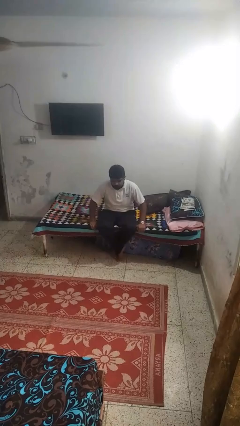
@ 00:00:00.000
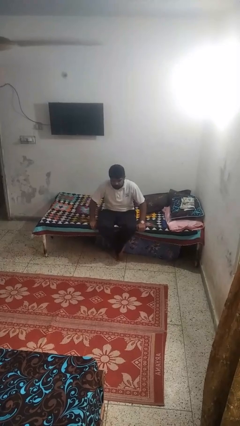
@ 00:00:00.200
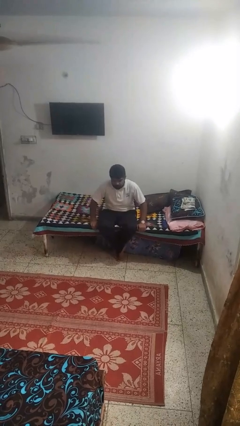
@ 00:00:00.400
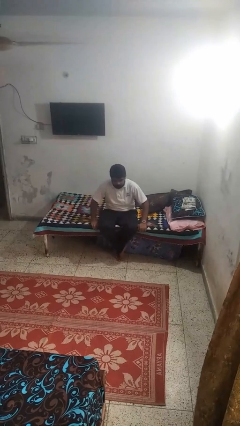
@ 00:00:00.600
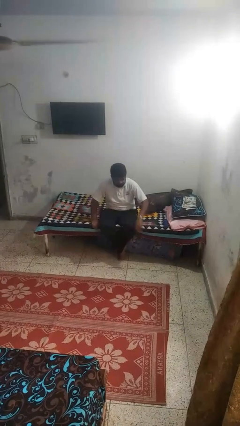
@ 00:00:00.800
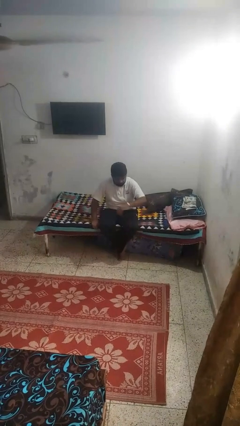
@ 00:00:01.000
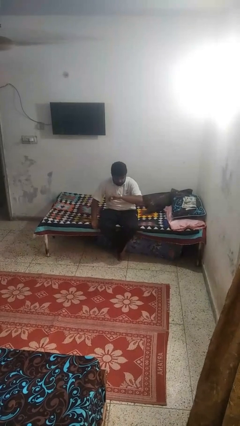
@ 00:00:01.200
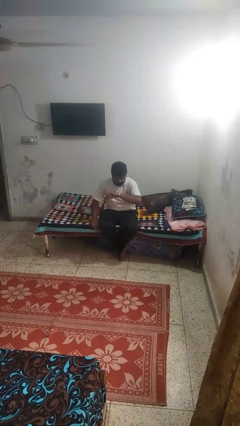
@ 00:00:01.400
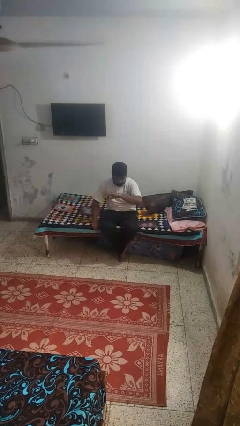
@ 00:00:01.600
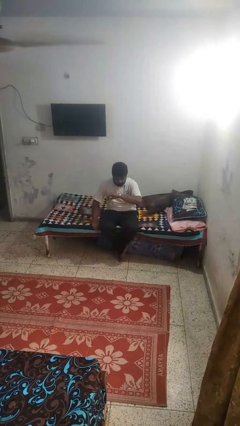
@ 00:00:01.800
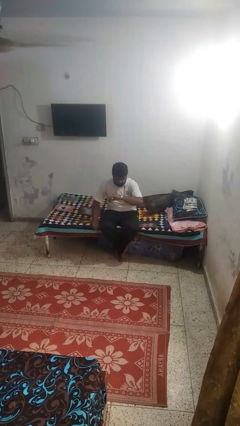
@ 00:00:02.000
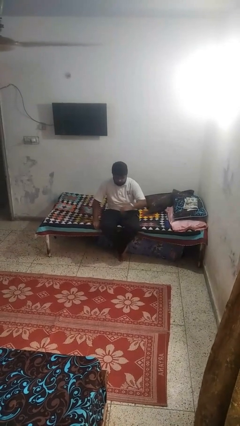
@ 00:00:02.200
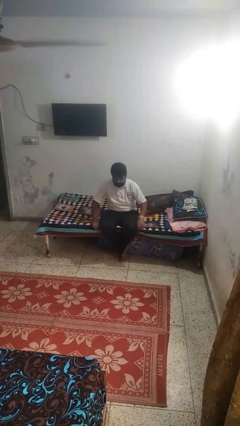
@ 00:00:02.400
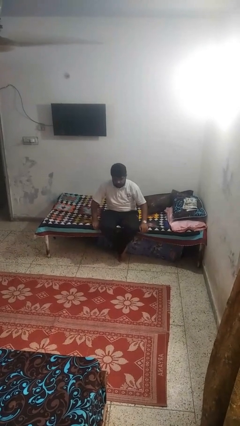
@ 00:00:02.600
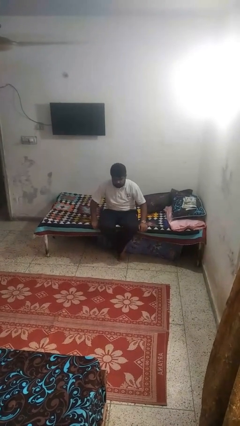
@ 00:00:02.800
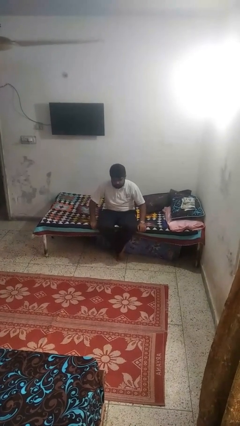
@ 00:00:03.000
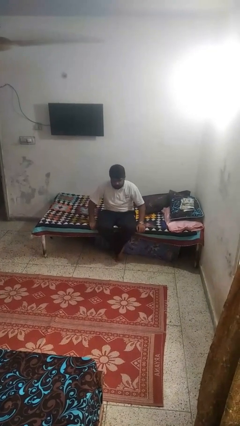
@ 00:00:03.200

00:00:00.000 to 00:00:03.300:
person looks at wristwatch

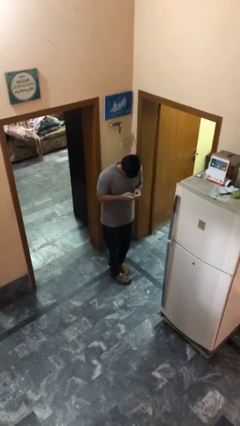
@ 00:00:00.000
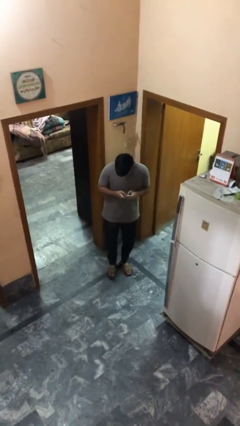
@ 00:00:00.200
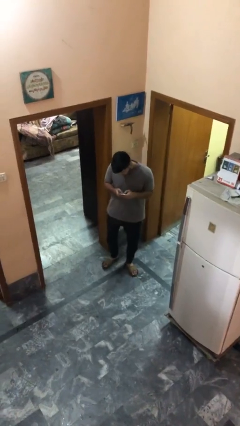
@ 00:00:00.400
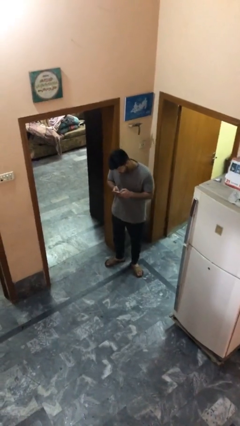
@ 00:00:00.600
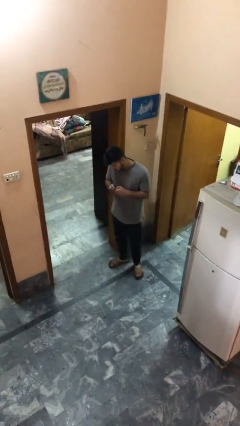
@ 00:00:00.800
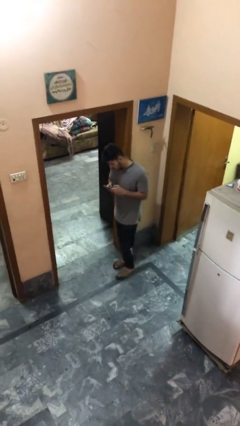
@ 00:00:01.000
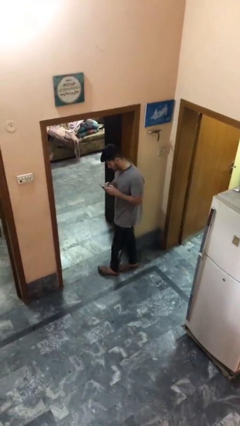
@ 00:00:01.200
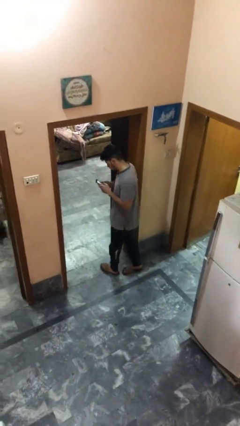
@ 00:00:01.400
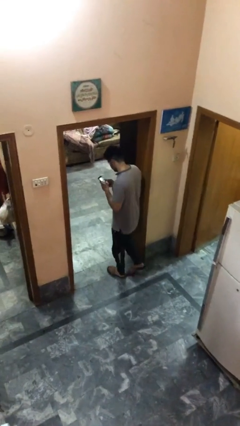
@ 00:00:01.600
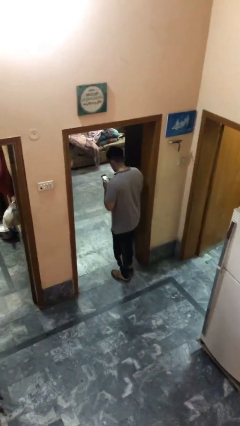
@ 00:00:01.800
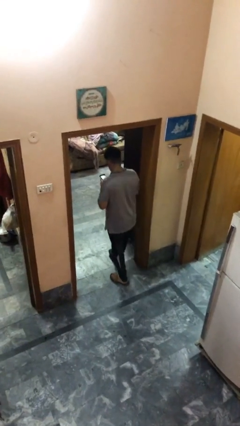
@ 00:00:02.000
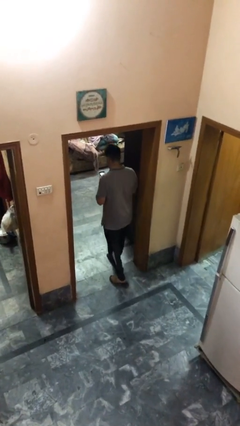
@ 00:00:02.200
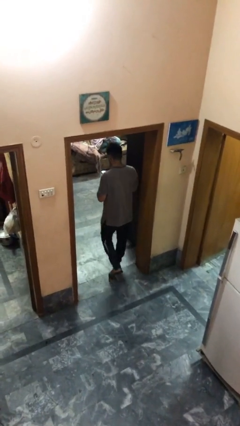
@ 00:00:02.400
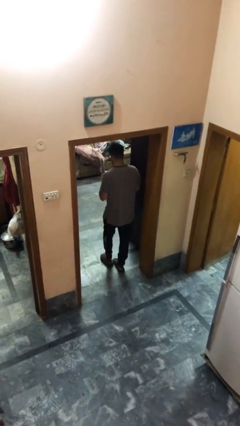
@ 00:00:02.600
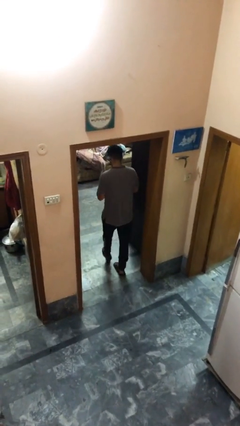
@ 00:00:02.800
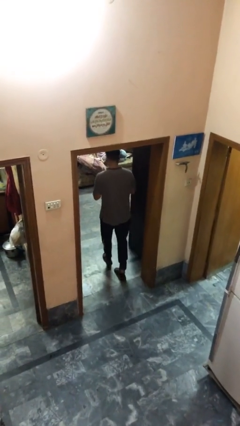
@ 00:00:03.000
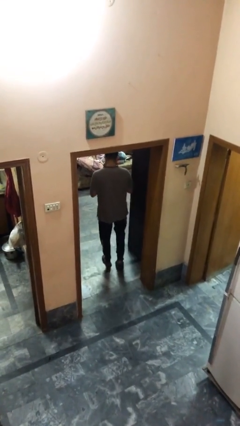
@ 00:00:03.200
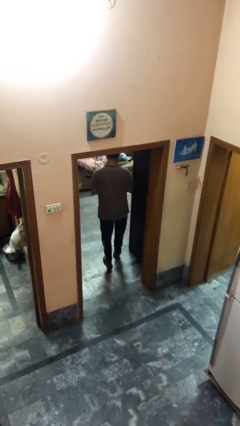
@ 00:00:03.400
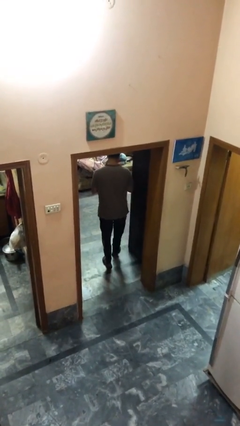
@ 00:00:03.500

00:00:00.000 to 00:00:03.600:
person exits scene through structure

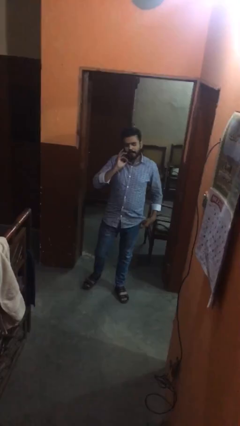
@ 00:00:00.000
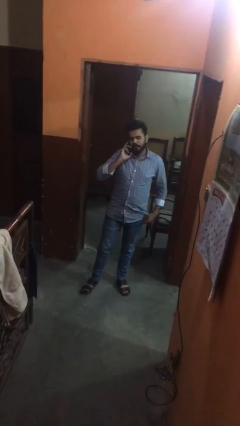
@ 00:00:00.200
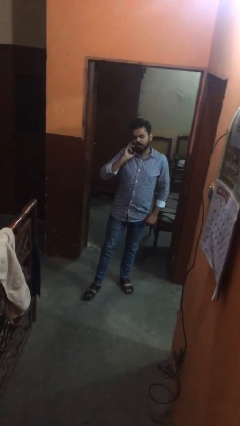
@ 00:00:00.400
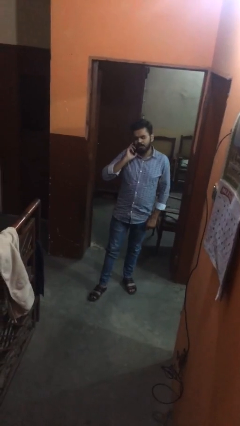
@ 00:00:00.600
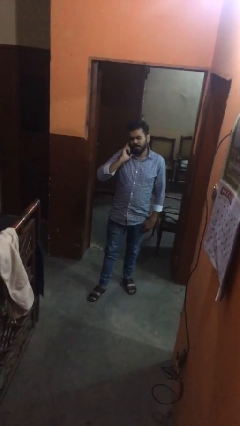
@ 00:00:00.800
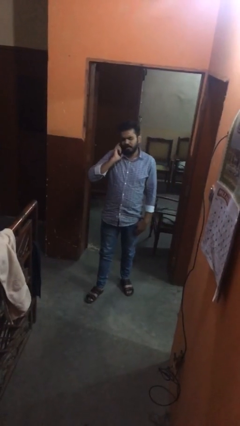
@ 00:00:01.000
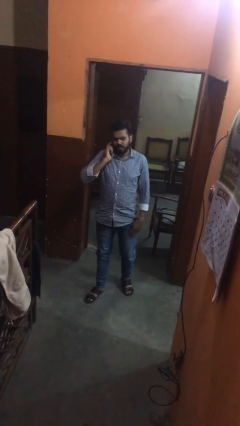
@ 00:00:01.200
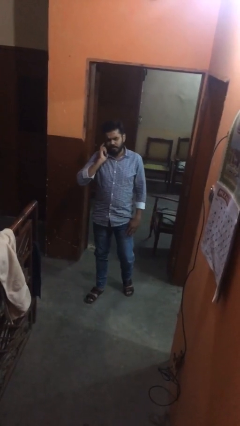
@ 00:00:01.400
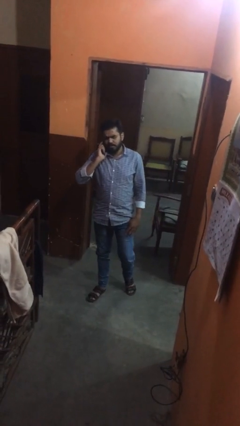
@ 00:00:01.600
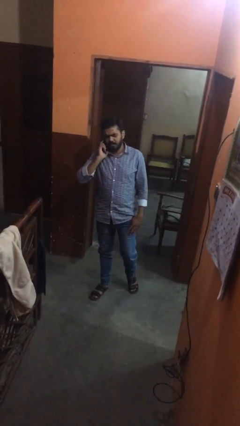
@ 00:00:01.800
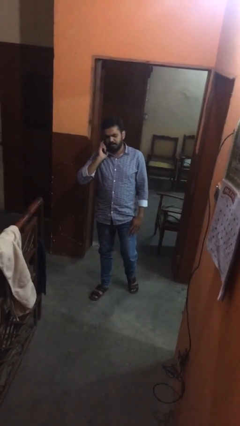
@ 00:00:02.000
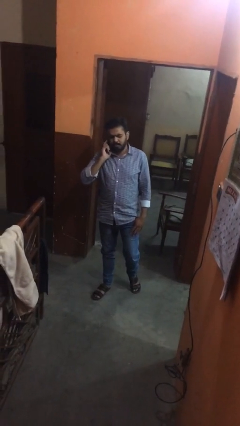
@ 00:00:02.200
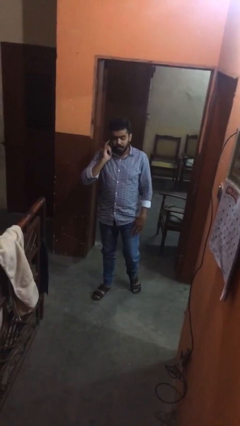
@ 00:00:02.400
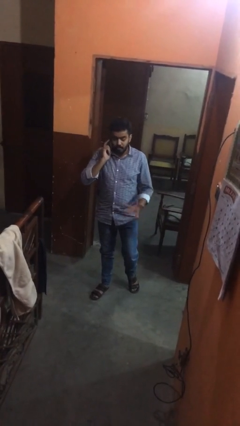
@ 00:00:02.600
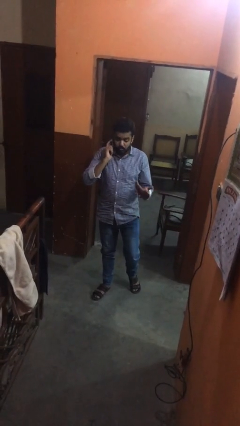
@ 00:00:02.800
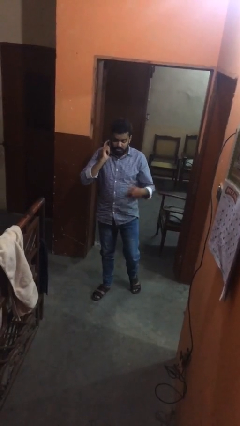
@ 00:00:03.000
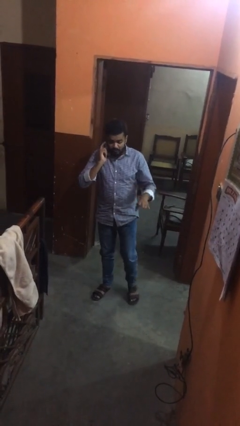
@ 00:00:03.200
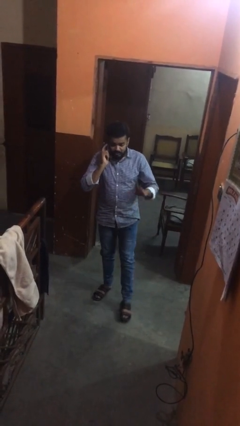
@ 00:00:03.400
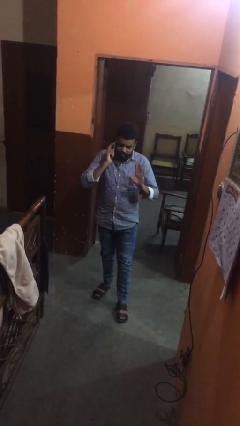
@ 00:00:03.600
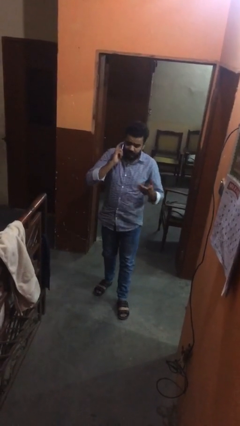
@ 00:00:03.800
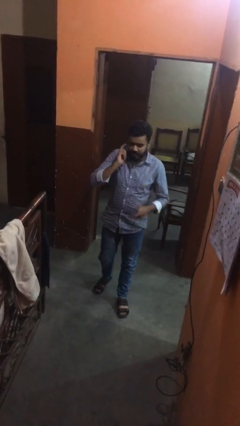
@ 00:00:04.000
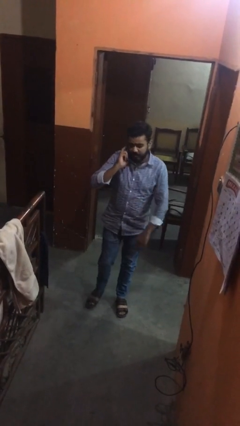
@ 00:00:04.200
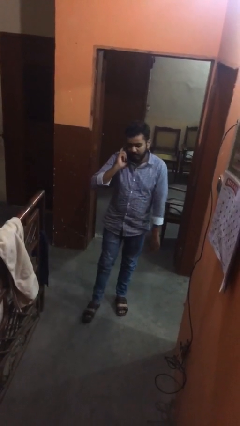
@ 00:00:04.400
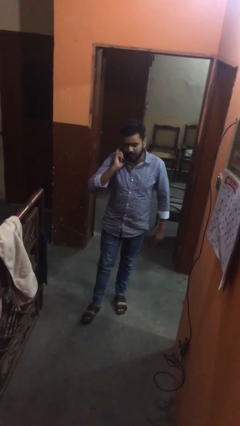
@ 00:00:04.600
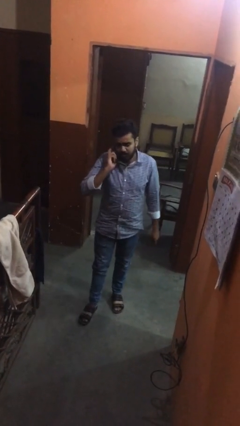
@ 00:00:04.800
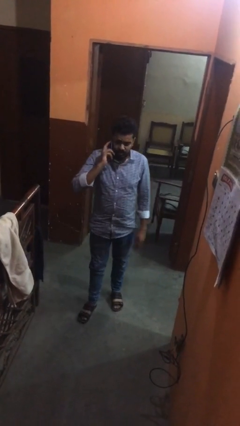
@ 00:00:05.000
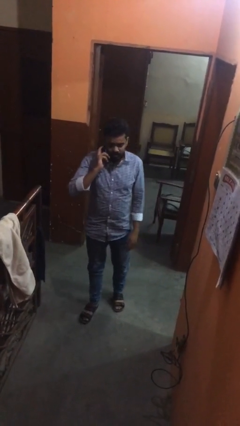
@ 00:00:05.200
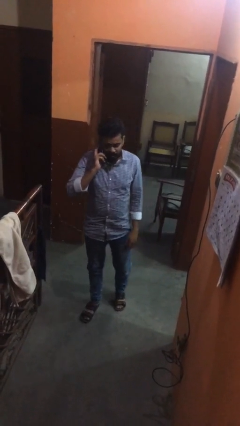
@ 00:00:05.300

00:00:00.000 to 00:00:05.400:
person talks on phone

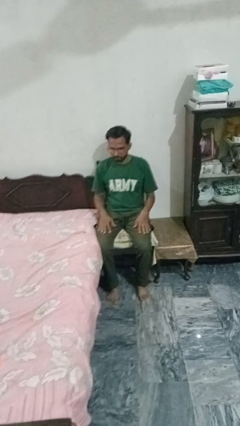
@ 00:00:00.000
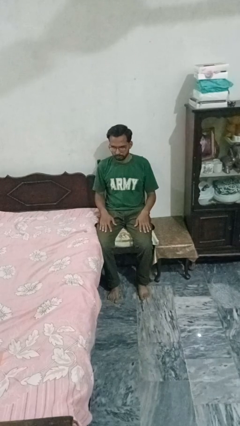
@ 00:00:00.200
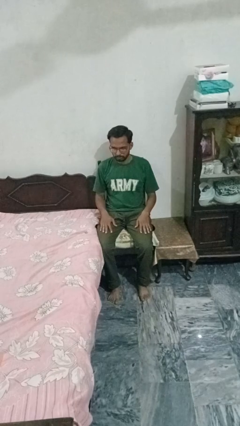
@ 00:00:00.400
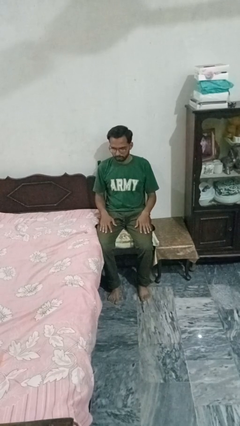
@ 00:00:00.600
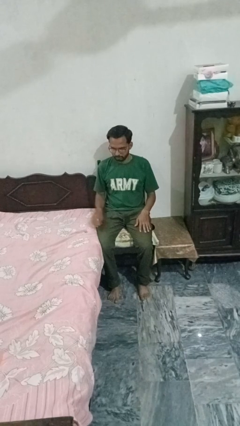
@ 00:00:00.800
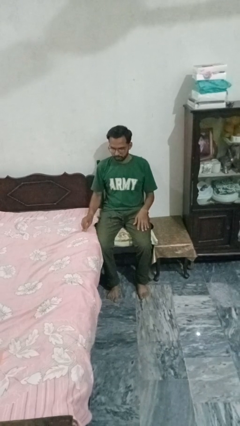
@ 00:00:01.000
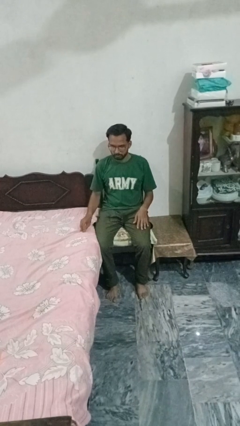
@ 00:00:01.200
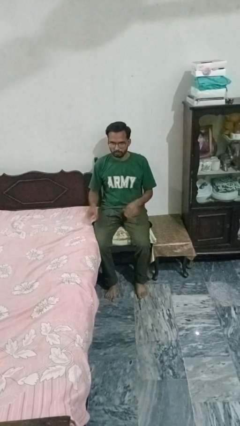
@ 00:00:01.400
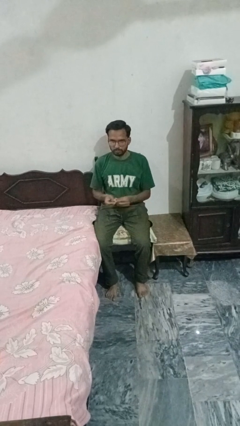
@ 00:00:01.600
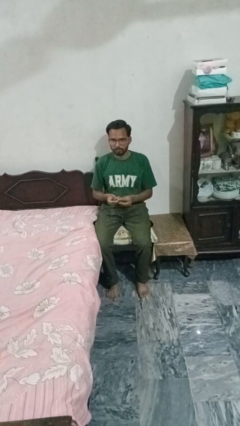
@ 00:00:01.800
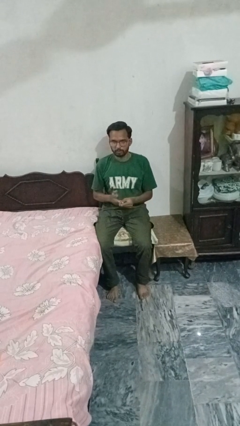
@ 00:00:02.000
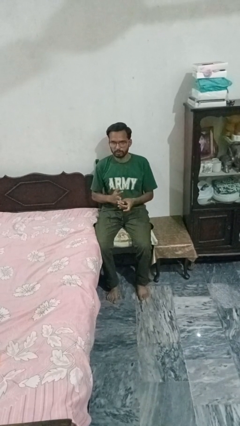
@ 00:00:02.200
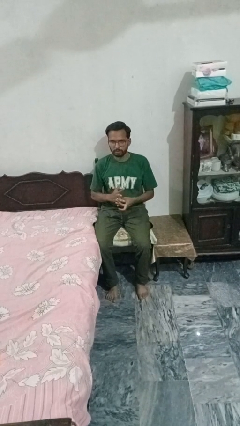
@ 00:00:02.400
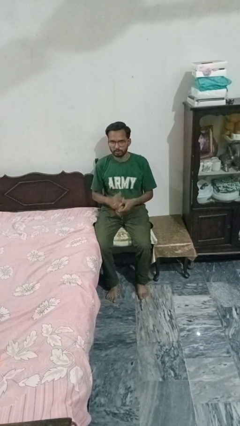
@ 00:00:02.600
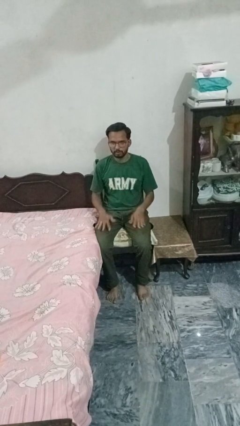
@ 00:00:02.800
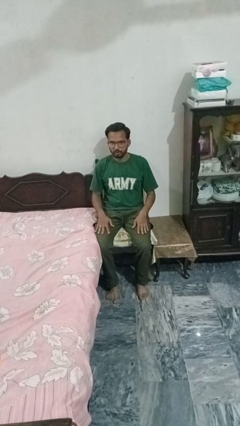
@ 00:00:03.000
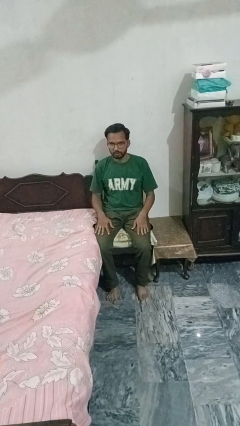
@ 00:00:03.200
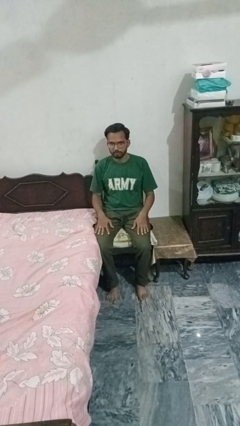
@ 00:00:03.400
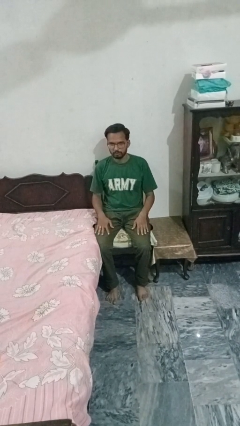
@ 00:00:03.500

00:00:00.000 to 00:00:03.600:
person puts on ring

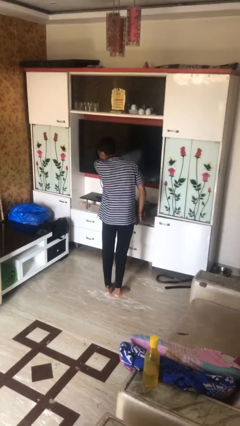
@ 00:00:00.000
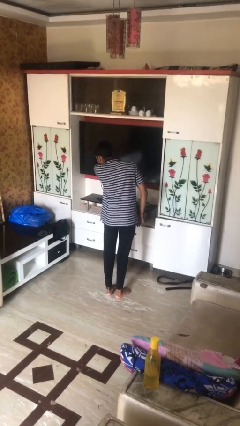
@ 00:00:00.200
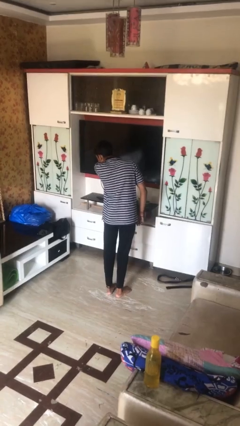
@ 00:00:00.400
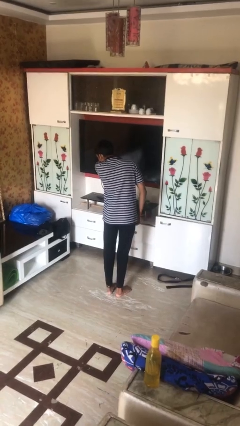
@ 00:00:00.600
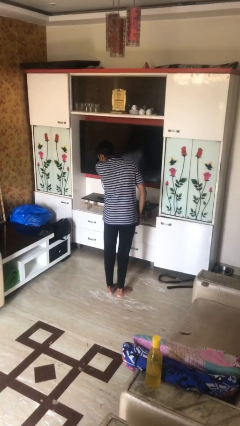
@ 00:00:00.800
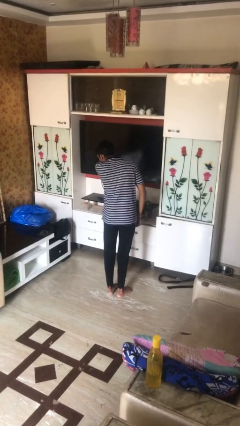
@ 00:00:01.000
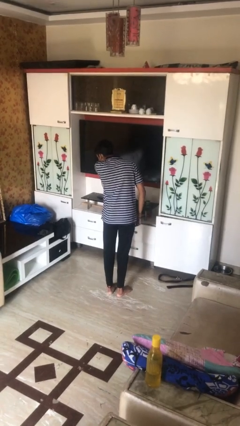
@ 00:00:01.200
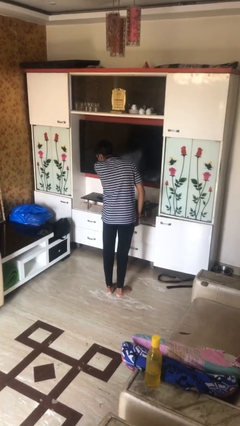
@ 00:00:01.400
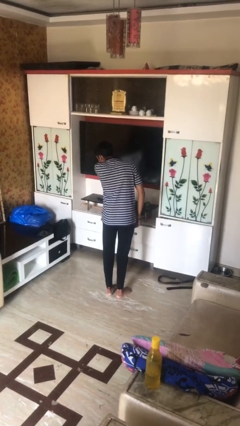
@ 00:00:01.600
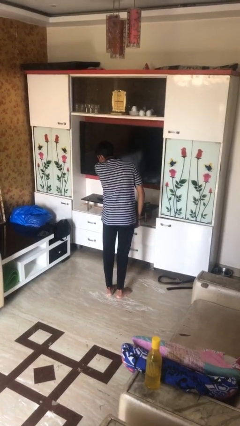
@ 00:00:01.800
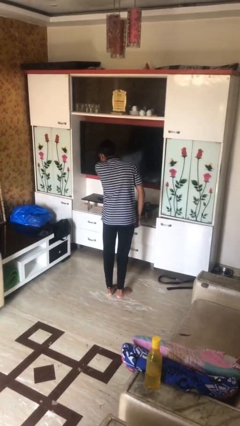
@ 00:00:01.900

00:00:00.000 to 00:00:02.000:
person sneezes into arm
